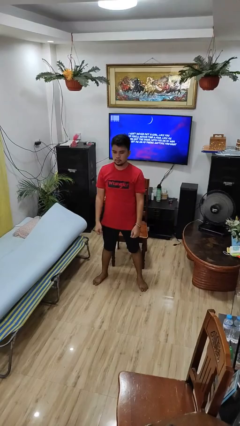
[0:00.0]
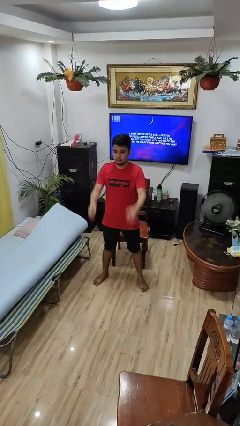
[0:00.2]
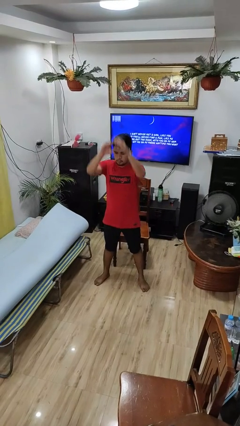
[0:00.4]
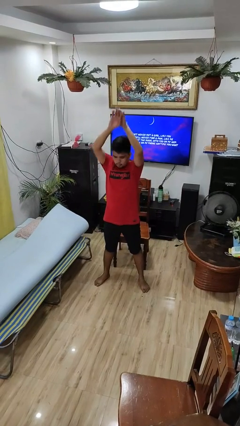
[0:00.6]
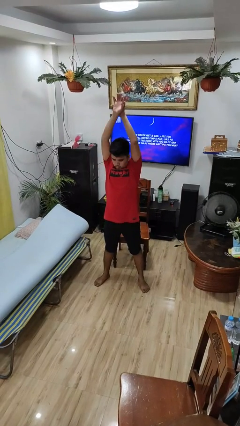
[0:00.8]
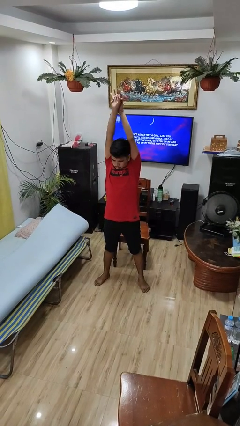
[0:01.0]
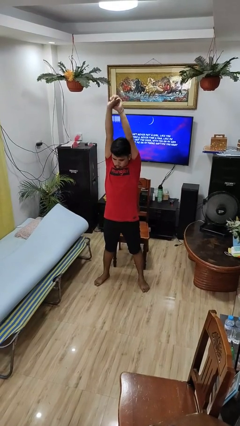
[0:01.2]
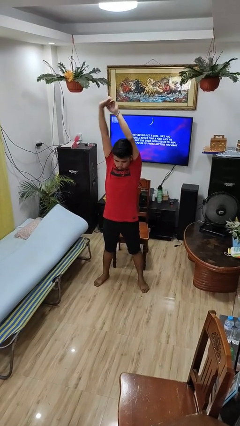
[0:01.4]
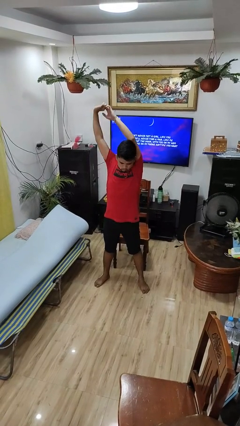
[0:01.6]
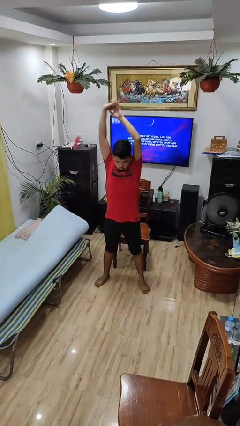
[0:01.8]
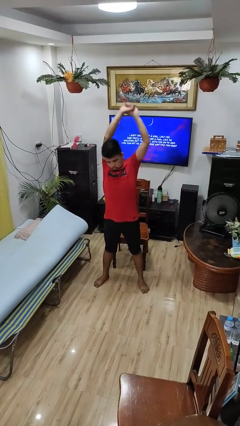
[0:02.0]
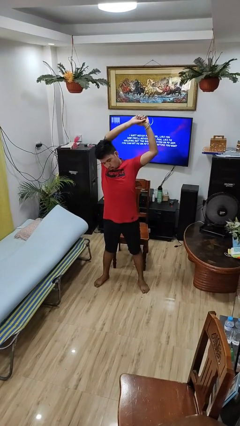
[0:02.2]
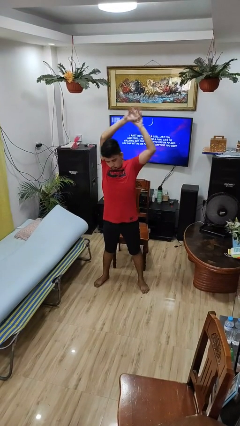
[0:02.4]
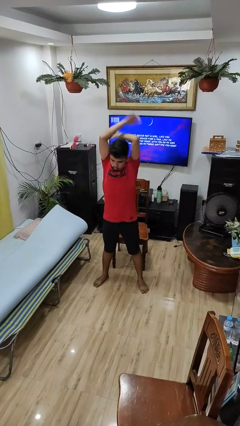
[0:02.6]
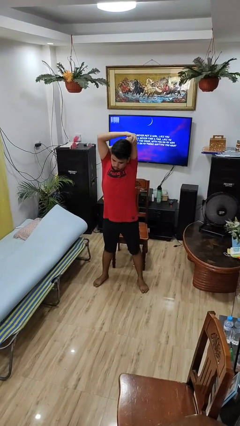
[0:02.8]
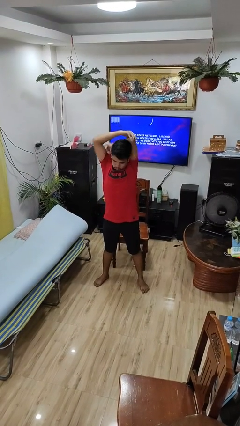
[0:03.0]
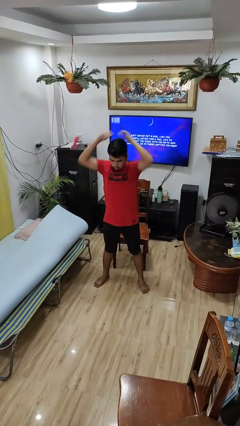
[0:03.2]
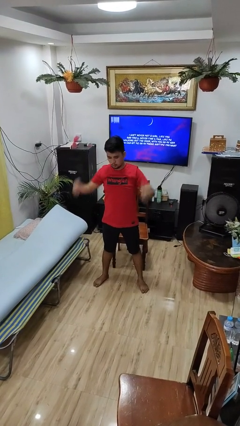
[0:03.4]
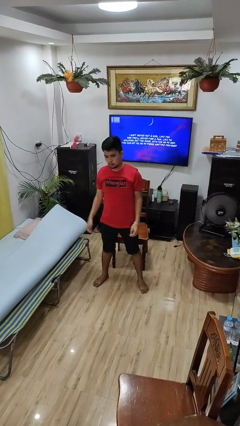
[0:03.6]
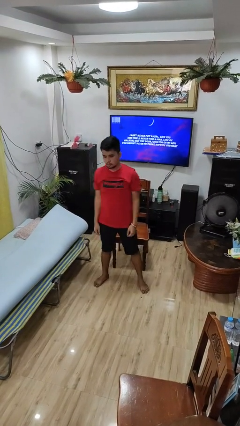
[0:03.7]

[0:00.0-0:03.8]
person stretches arms over head

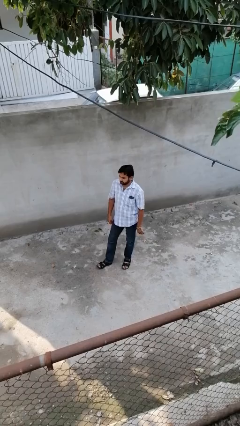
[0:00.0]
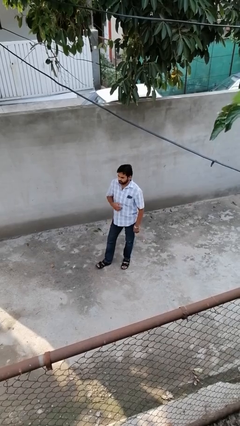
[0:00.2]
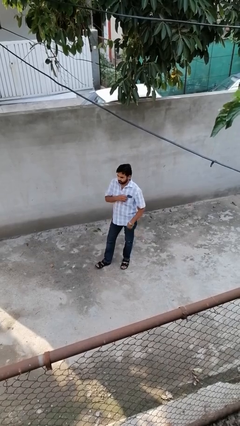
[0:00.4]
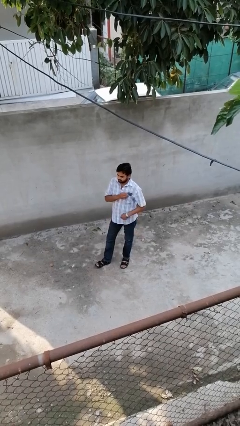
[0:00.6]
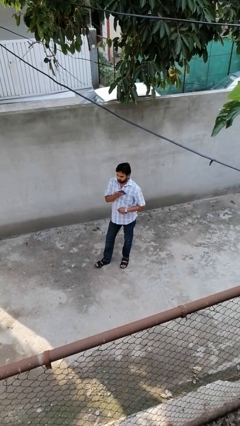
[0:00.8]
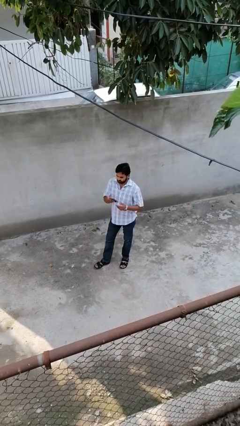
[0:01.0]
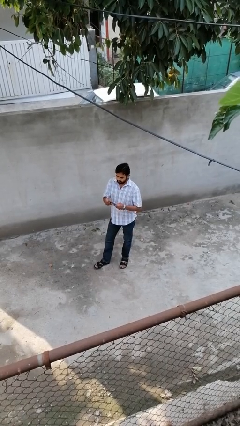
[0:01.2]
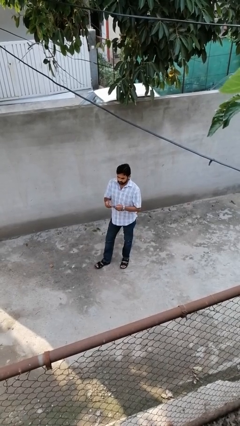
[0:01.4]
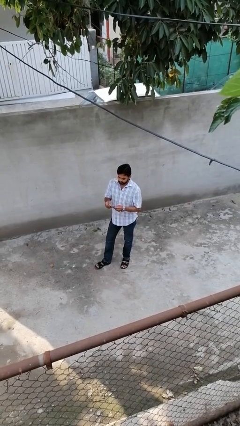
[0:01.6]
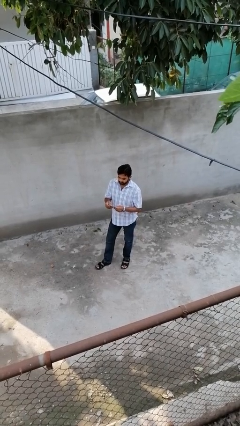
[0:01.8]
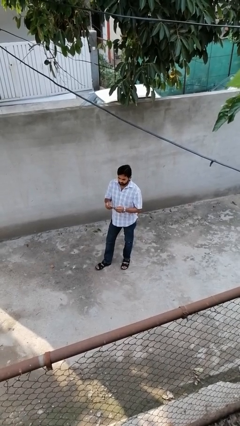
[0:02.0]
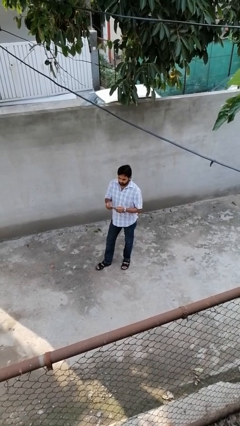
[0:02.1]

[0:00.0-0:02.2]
person takes phone from pocket

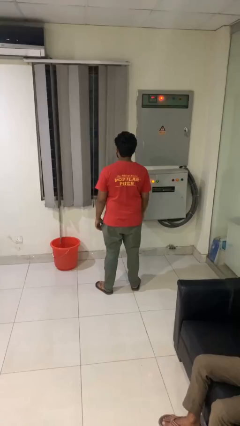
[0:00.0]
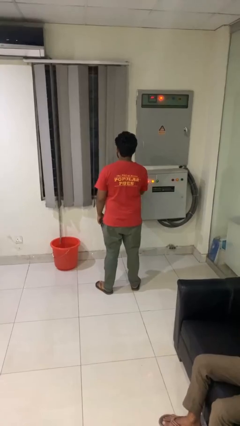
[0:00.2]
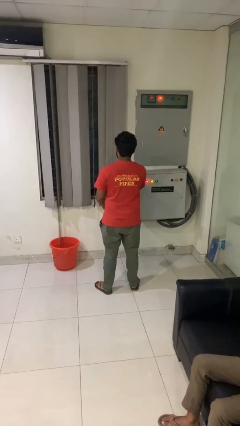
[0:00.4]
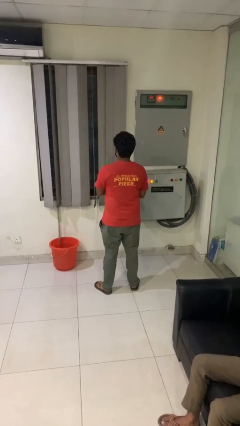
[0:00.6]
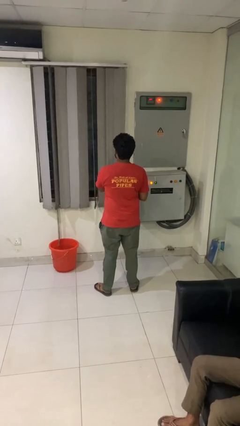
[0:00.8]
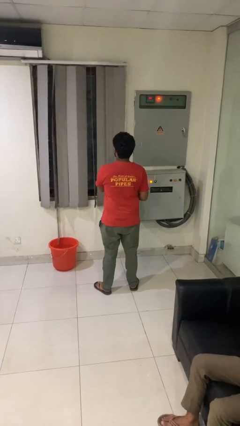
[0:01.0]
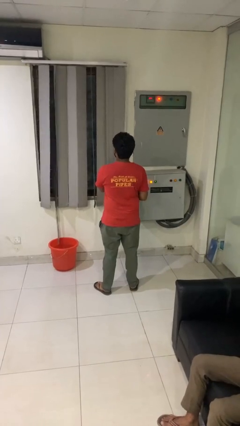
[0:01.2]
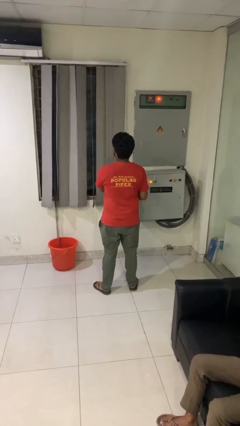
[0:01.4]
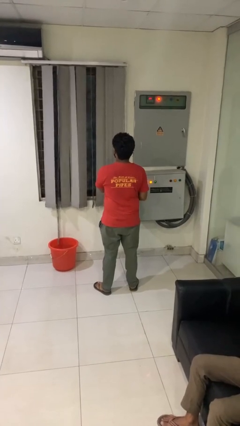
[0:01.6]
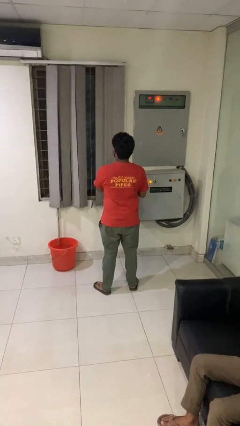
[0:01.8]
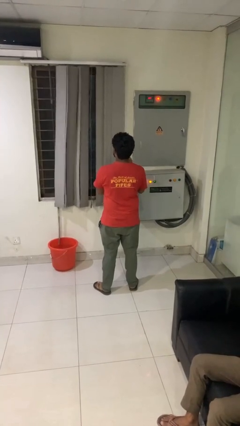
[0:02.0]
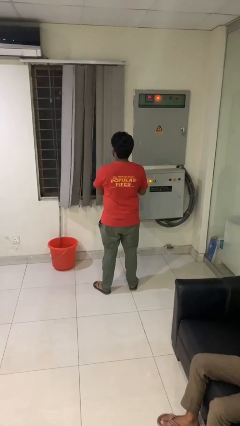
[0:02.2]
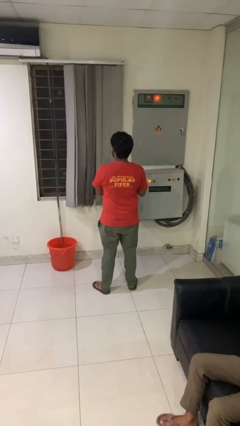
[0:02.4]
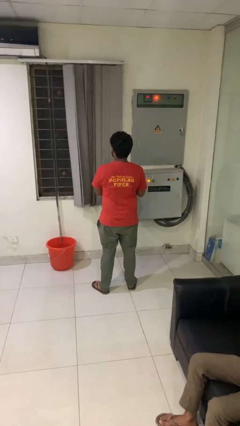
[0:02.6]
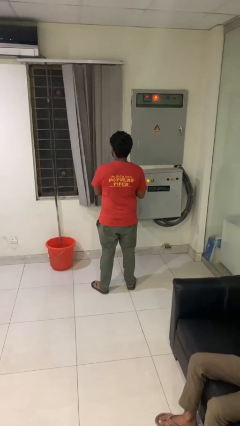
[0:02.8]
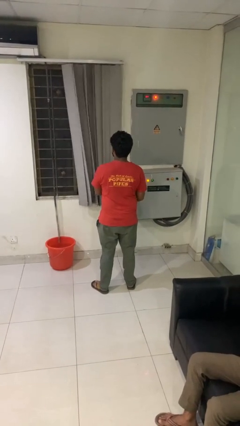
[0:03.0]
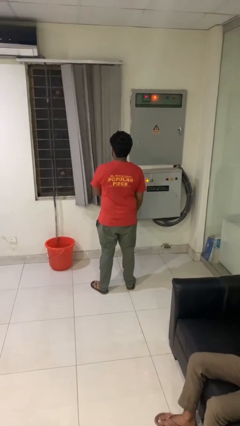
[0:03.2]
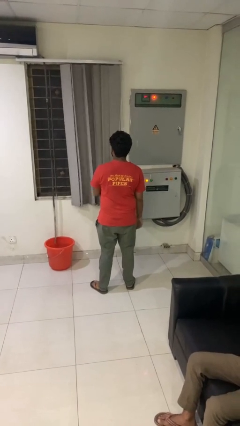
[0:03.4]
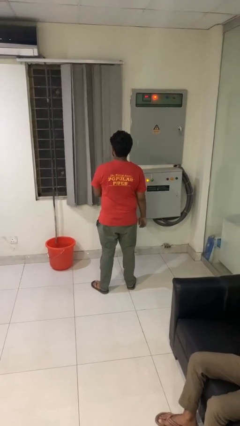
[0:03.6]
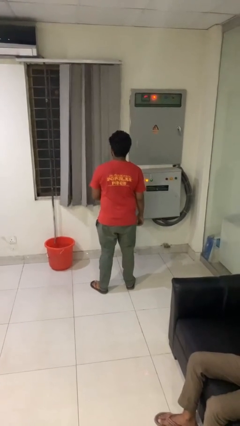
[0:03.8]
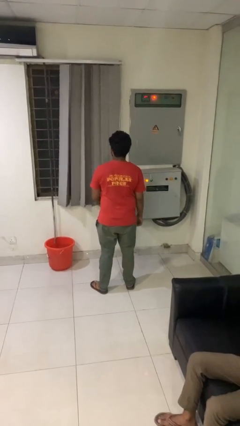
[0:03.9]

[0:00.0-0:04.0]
person opens curtains

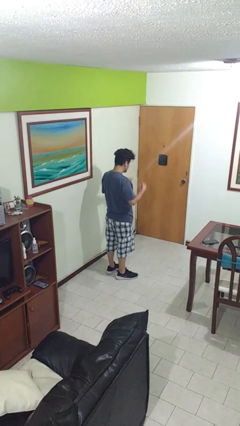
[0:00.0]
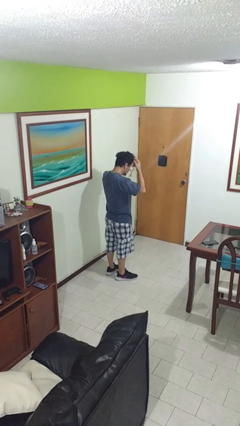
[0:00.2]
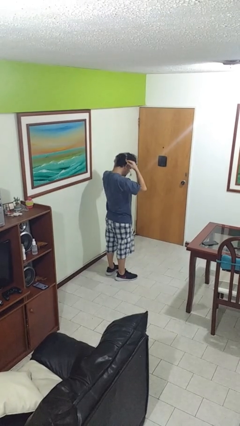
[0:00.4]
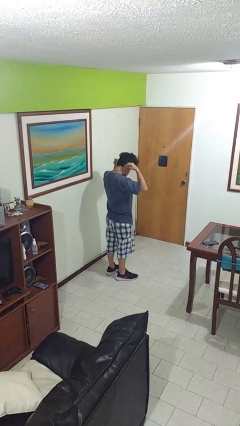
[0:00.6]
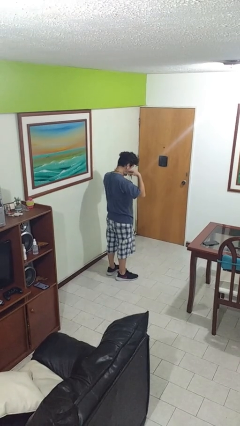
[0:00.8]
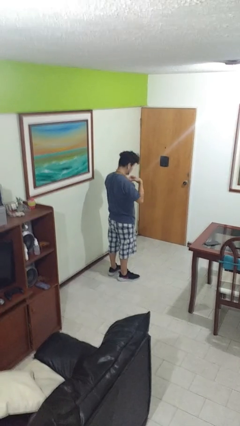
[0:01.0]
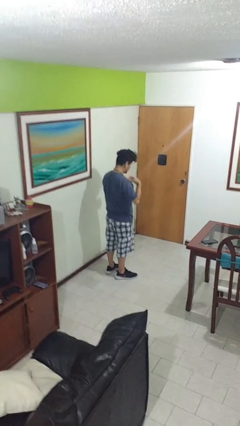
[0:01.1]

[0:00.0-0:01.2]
person puts on necklace

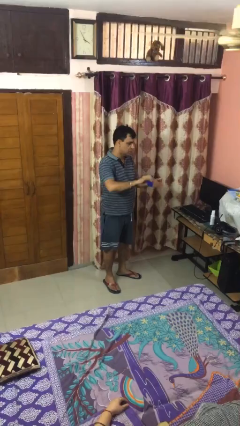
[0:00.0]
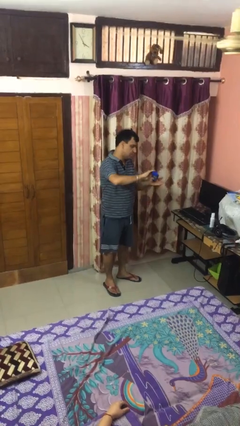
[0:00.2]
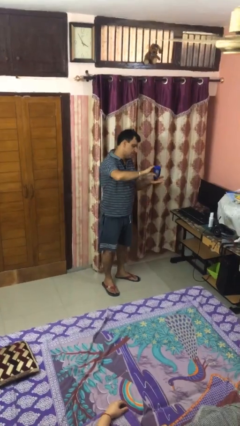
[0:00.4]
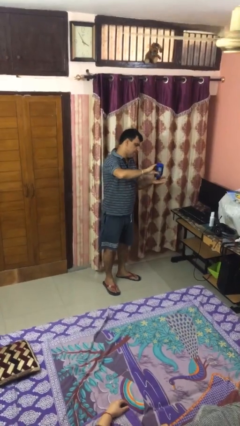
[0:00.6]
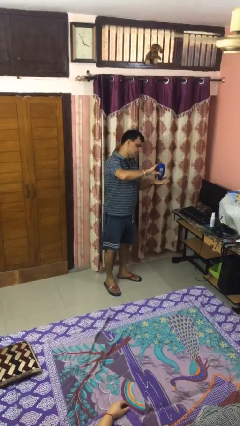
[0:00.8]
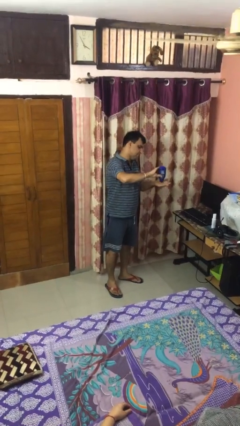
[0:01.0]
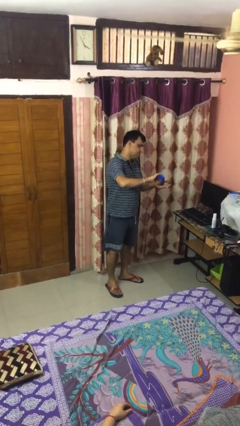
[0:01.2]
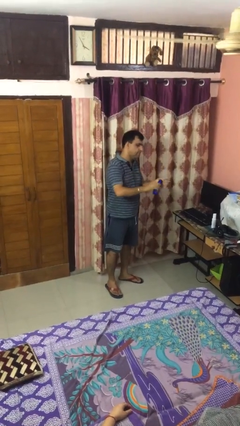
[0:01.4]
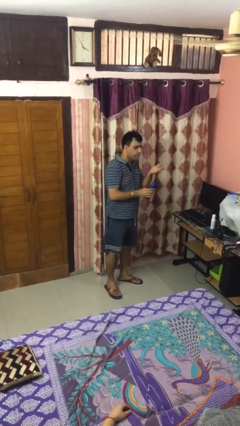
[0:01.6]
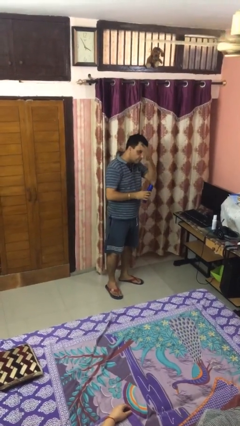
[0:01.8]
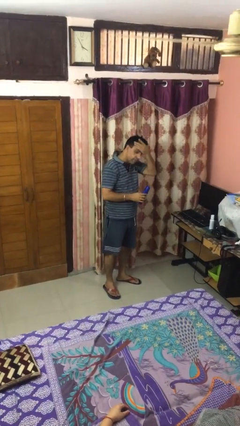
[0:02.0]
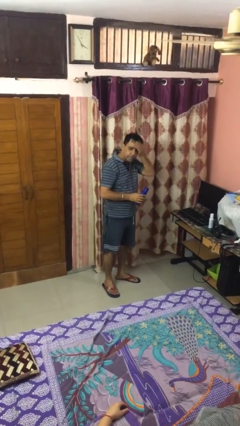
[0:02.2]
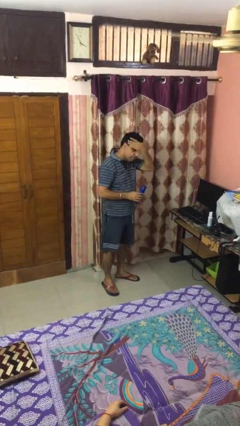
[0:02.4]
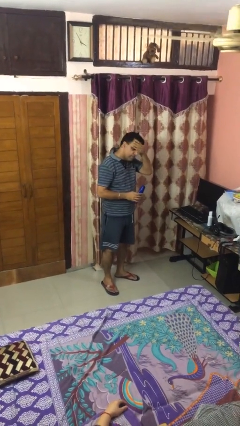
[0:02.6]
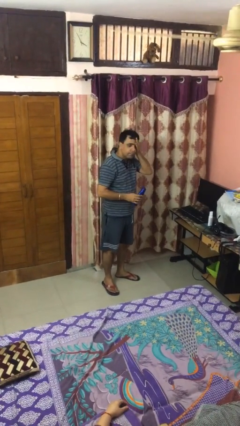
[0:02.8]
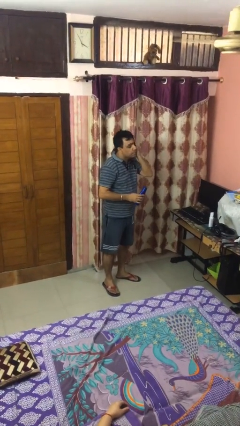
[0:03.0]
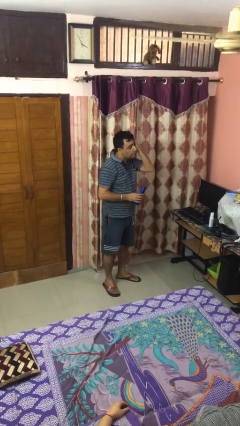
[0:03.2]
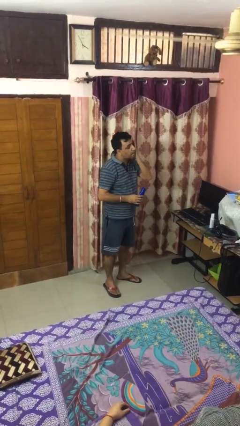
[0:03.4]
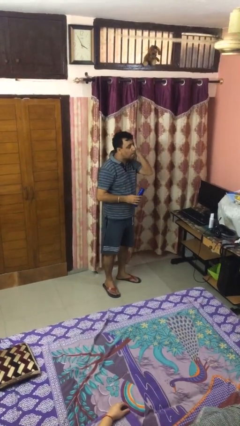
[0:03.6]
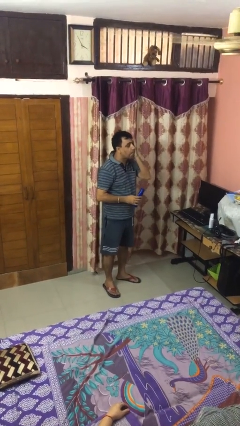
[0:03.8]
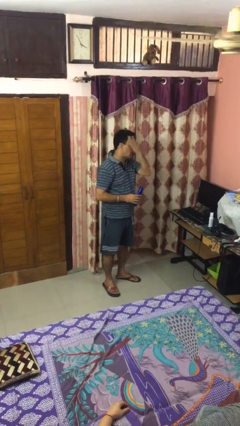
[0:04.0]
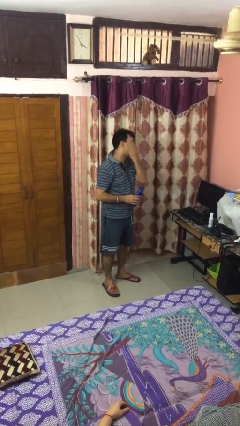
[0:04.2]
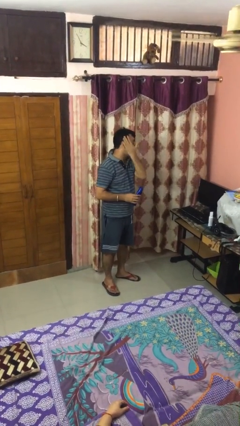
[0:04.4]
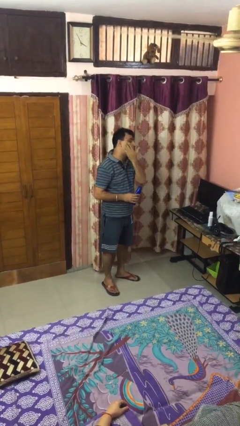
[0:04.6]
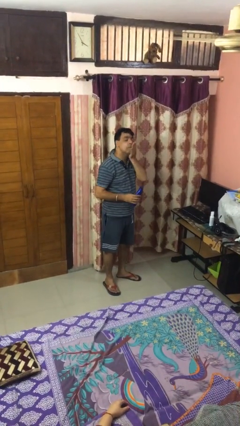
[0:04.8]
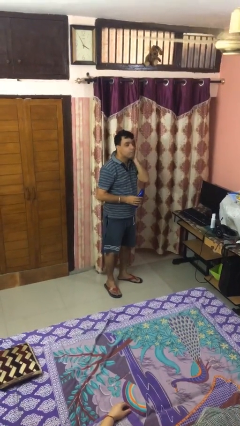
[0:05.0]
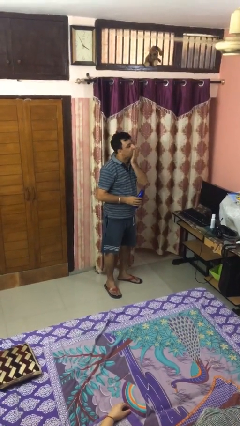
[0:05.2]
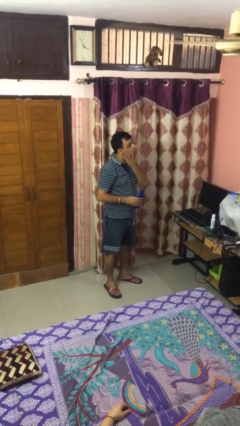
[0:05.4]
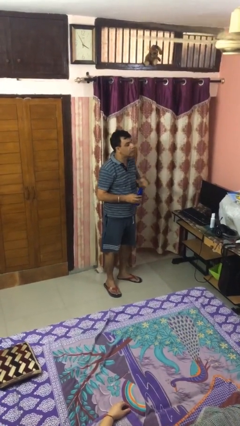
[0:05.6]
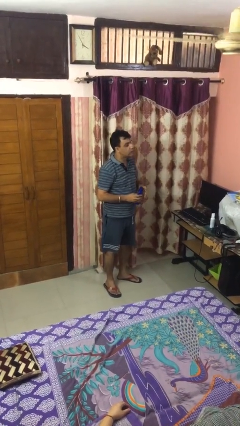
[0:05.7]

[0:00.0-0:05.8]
person applies facial moisturizer

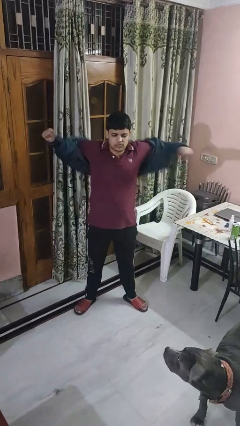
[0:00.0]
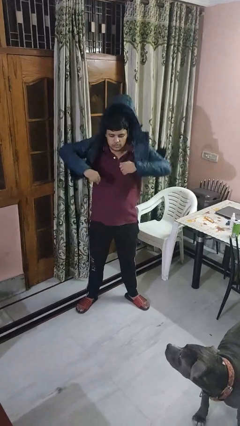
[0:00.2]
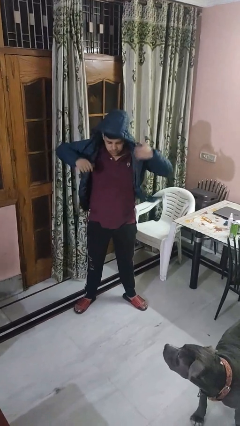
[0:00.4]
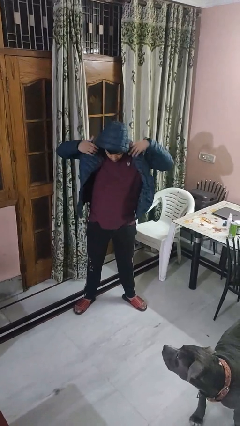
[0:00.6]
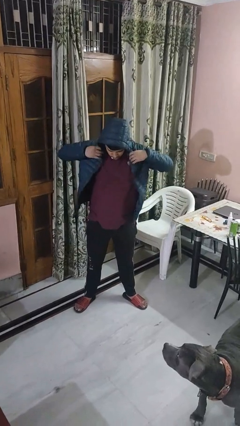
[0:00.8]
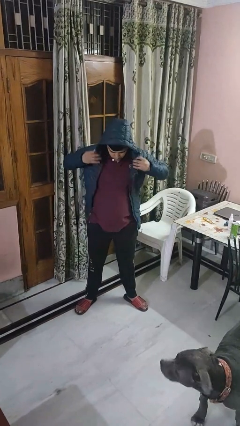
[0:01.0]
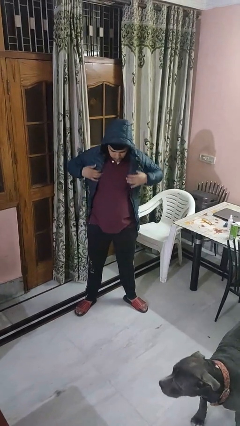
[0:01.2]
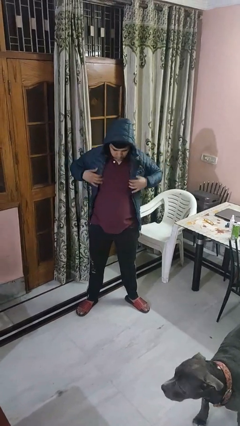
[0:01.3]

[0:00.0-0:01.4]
person puts on hoodie
